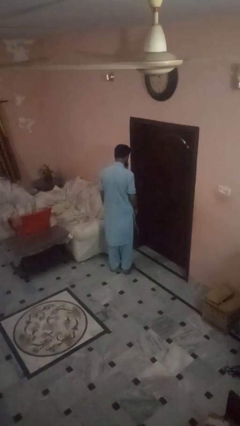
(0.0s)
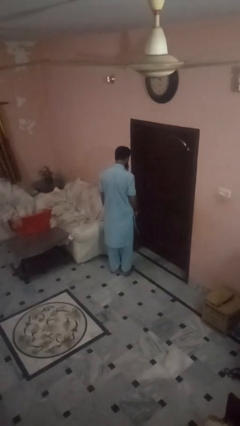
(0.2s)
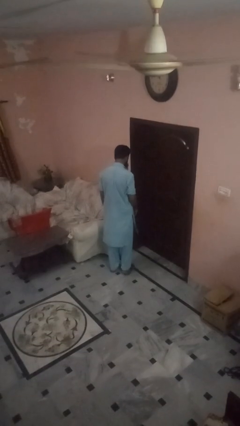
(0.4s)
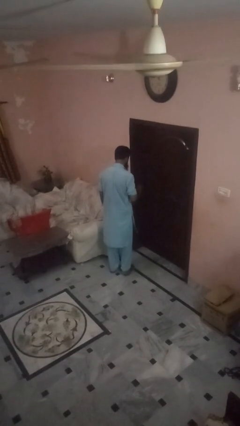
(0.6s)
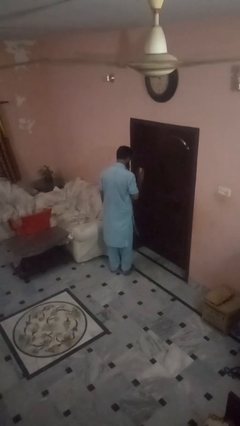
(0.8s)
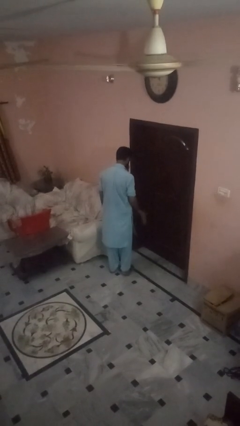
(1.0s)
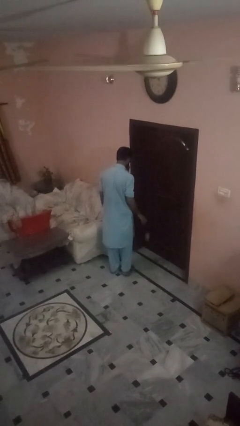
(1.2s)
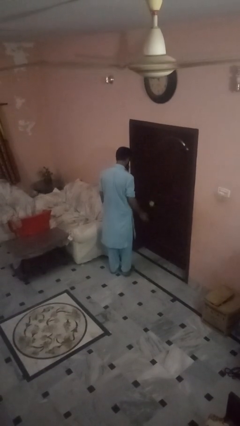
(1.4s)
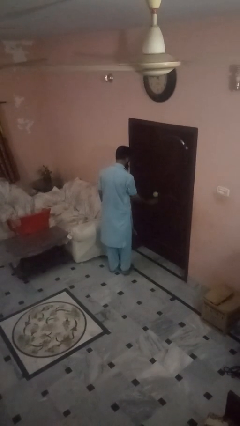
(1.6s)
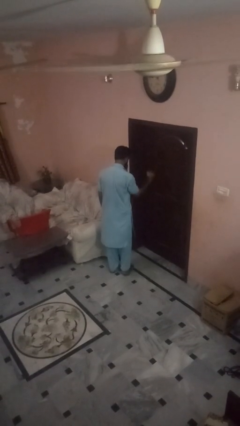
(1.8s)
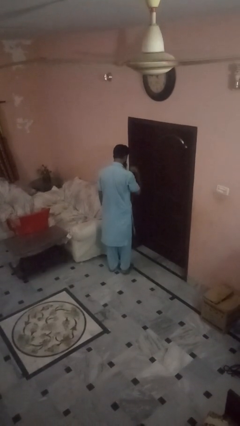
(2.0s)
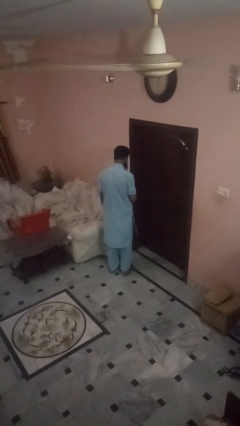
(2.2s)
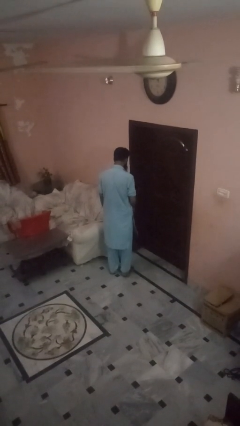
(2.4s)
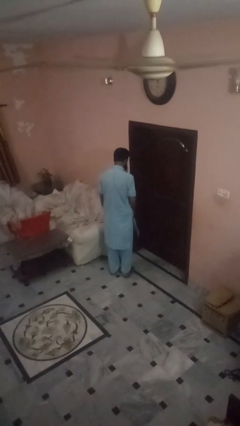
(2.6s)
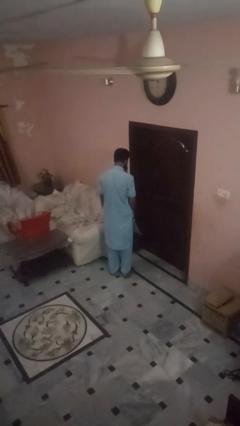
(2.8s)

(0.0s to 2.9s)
person bounces ball on floor

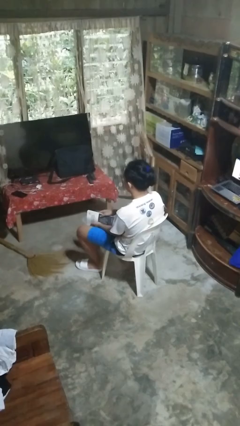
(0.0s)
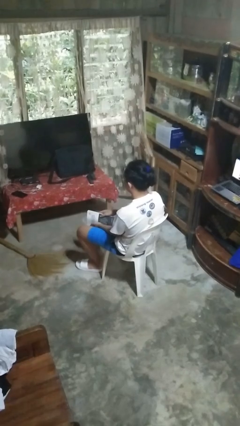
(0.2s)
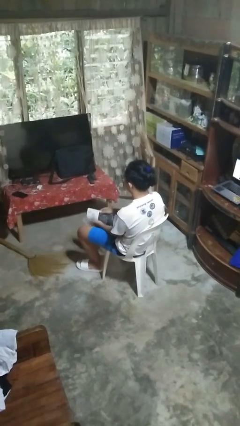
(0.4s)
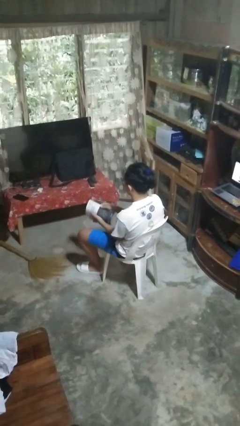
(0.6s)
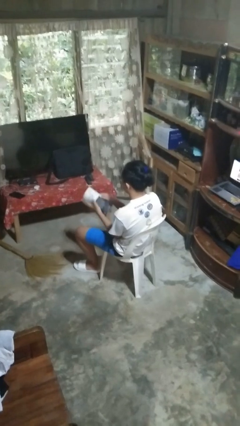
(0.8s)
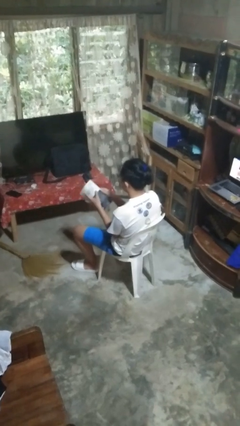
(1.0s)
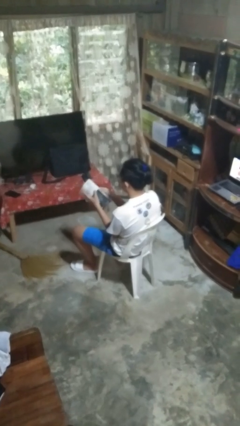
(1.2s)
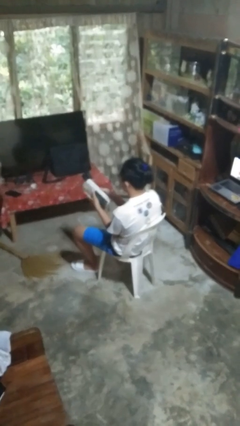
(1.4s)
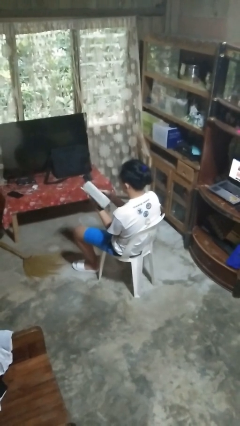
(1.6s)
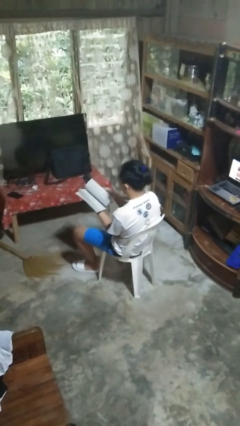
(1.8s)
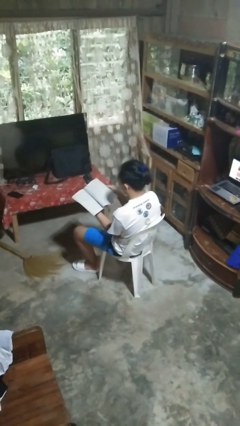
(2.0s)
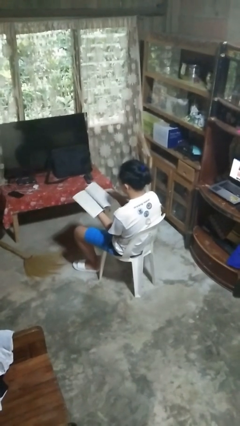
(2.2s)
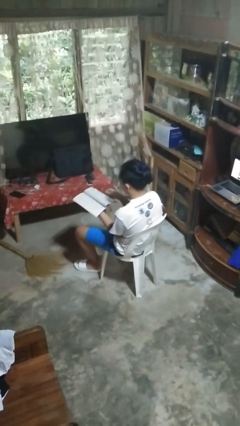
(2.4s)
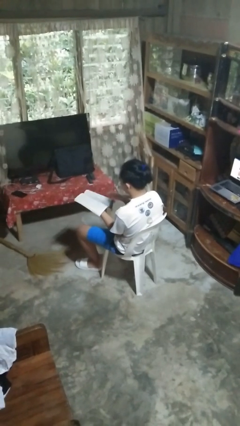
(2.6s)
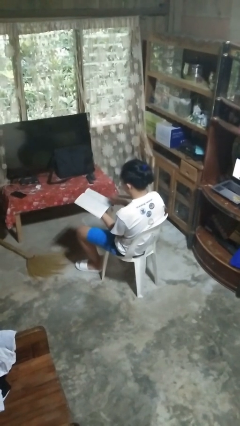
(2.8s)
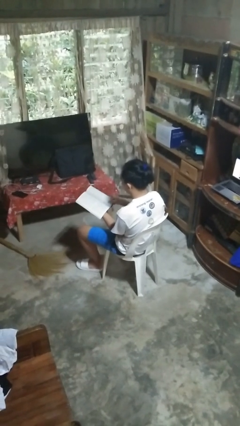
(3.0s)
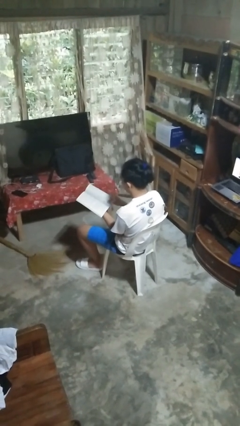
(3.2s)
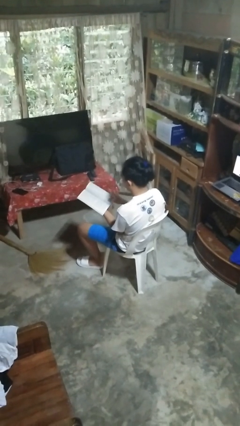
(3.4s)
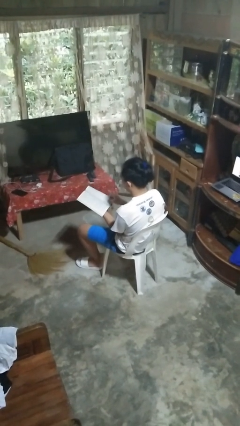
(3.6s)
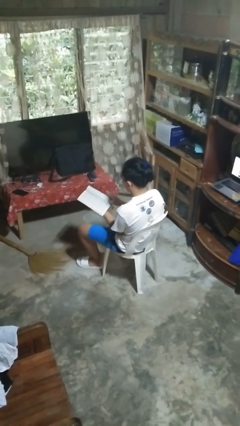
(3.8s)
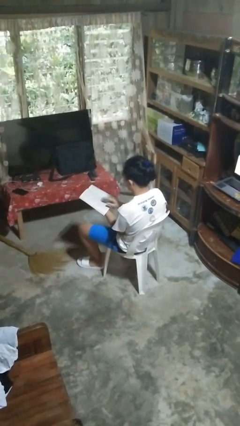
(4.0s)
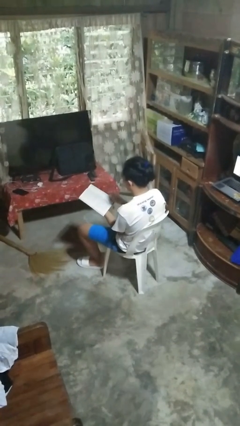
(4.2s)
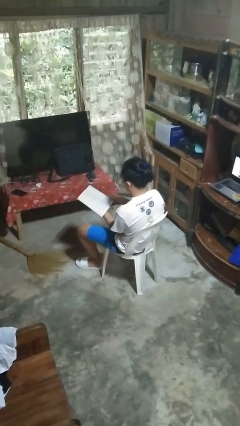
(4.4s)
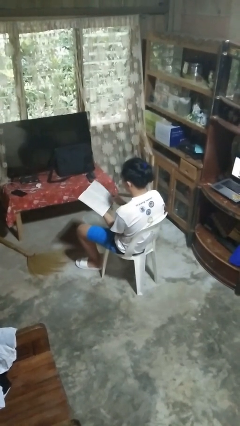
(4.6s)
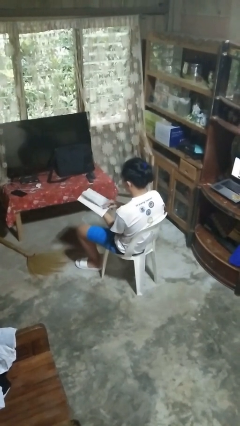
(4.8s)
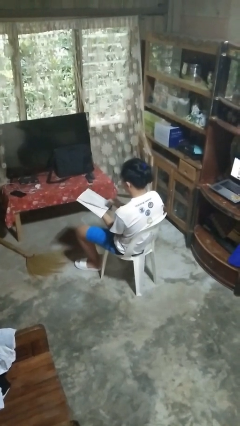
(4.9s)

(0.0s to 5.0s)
person reads book

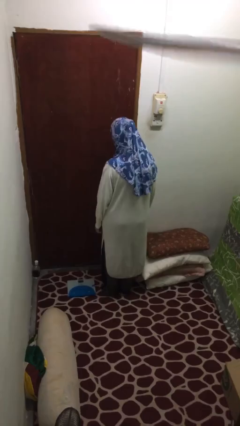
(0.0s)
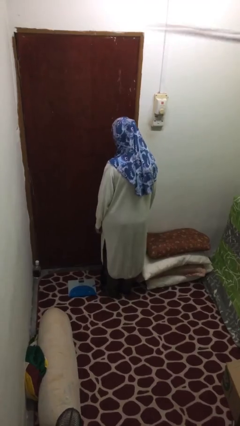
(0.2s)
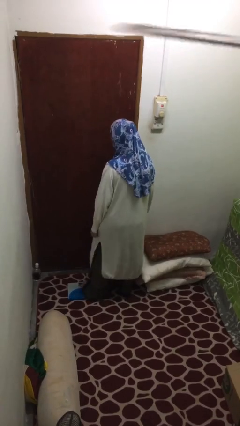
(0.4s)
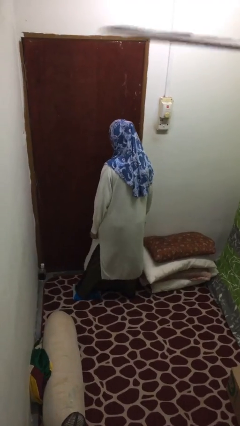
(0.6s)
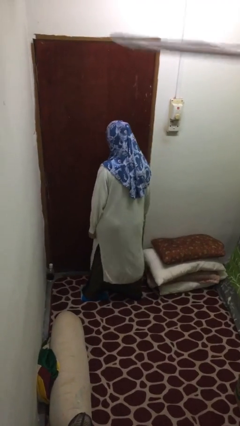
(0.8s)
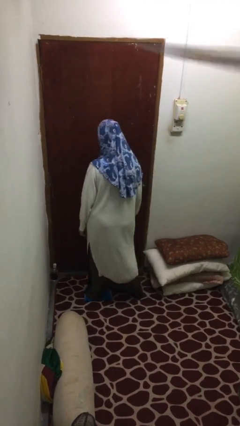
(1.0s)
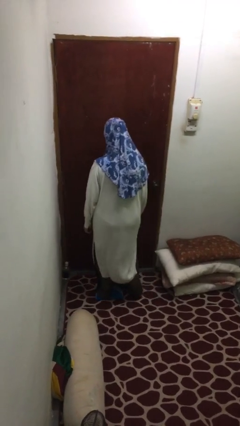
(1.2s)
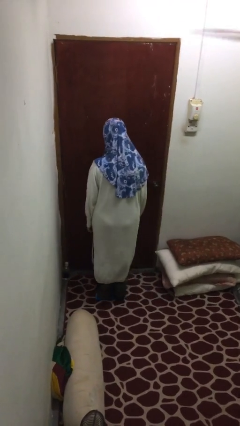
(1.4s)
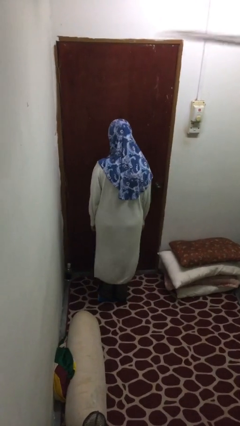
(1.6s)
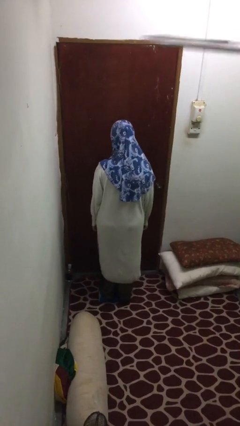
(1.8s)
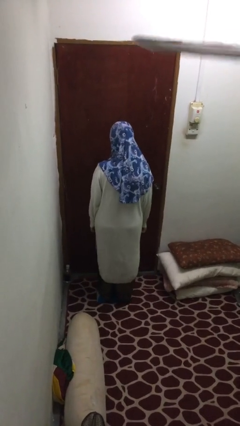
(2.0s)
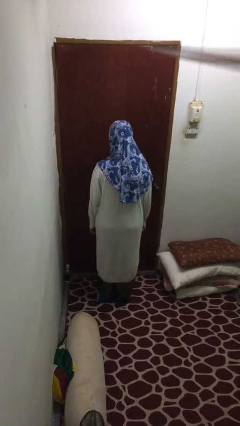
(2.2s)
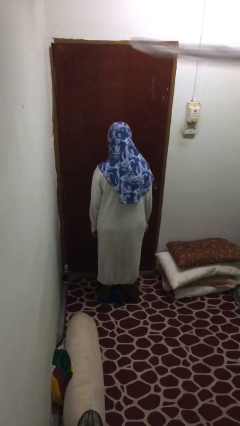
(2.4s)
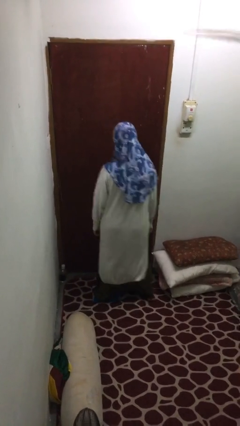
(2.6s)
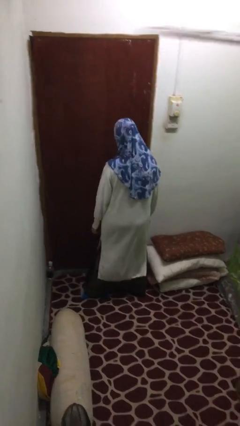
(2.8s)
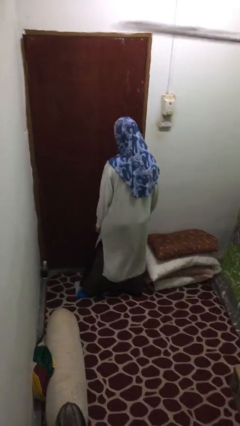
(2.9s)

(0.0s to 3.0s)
person uses bodyweight scale

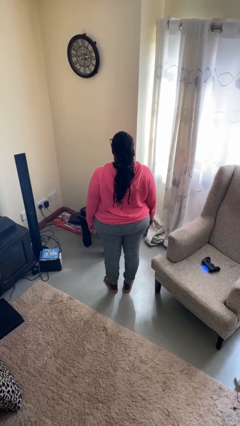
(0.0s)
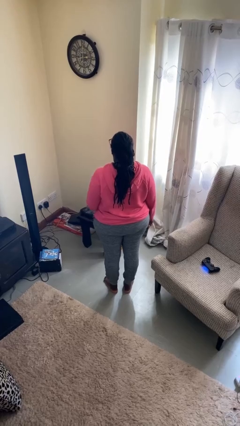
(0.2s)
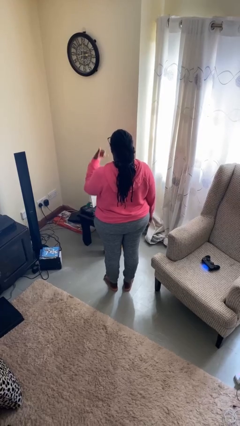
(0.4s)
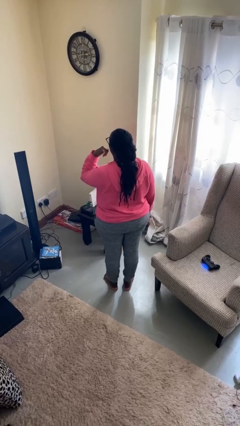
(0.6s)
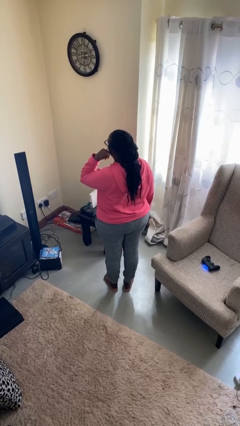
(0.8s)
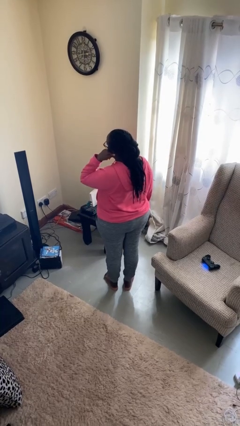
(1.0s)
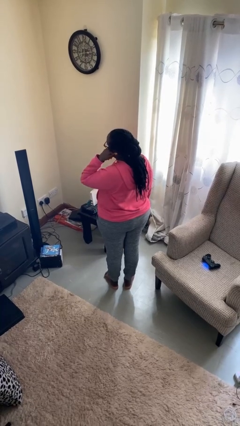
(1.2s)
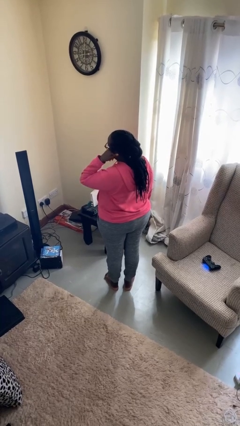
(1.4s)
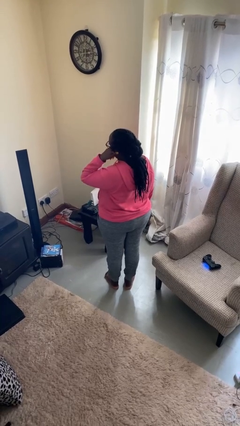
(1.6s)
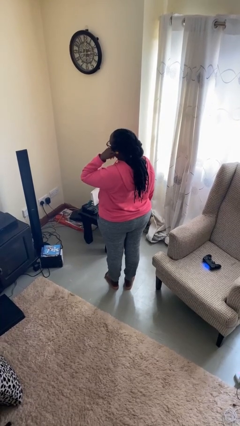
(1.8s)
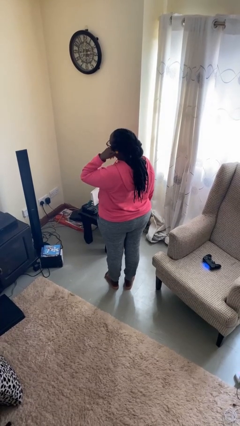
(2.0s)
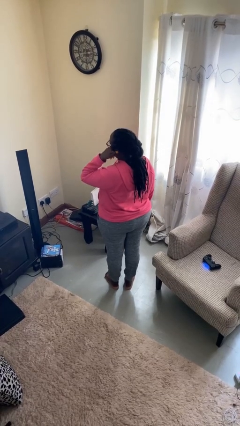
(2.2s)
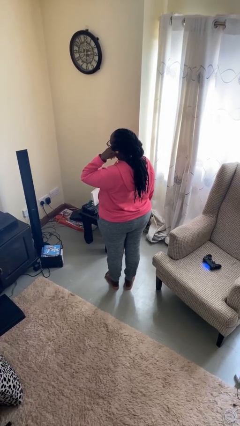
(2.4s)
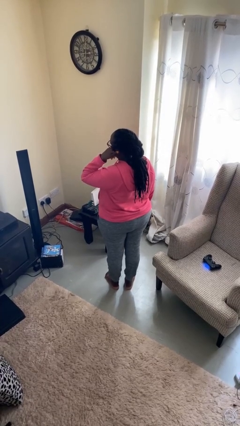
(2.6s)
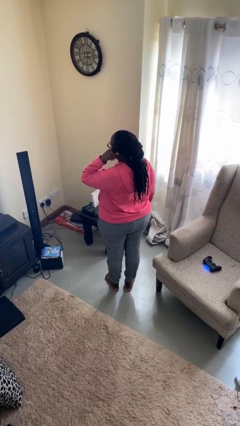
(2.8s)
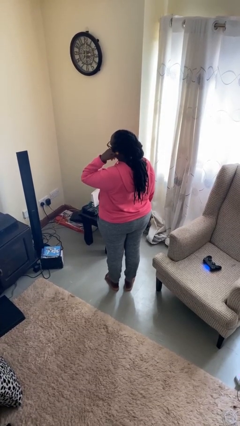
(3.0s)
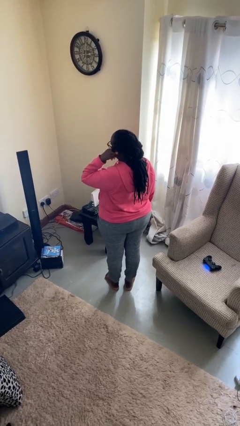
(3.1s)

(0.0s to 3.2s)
person gestures call me

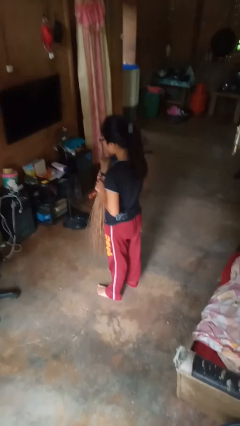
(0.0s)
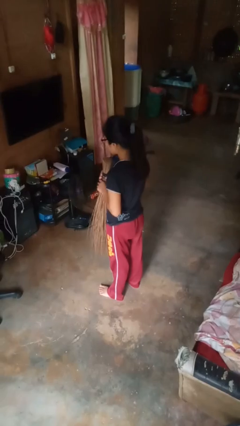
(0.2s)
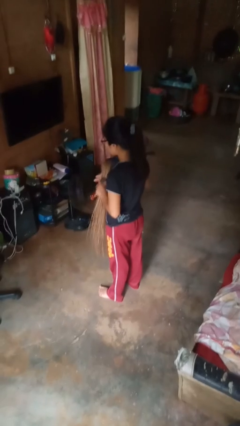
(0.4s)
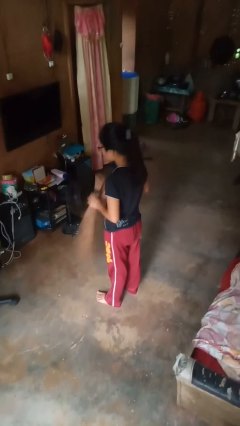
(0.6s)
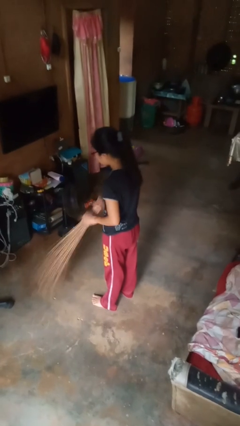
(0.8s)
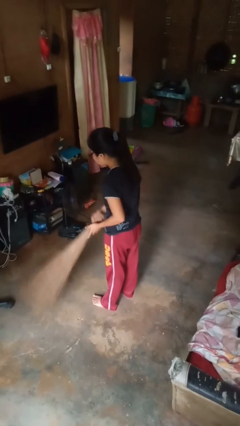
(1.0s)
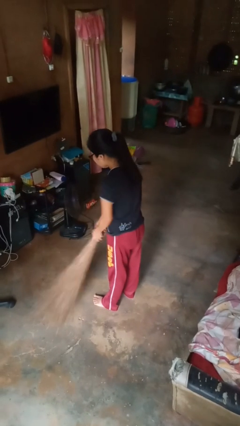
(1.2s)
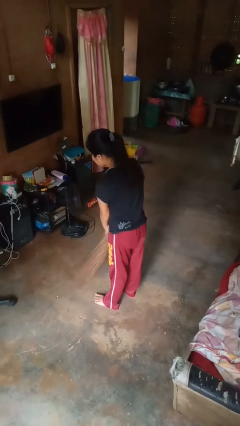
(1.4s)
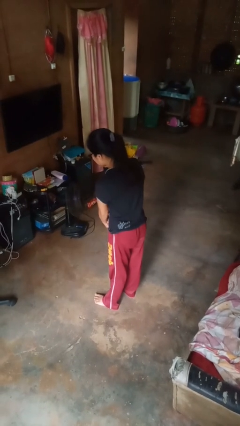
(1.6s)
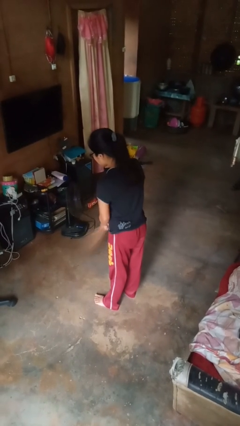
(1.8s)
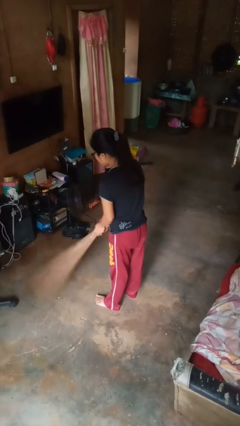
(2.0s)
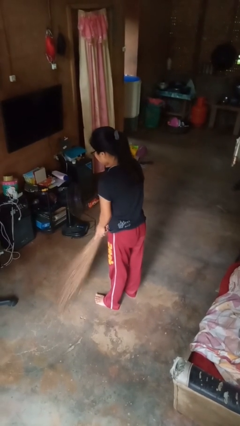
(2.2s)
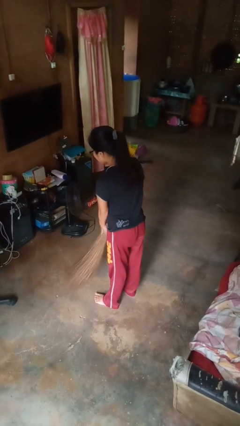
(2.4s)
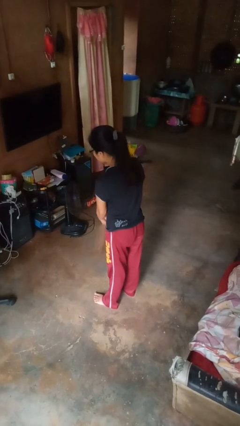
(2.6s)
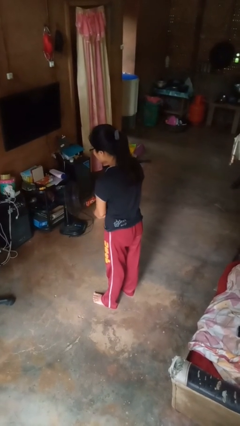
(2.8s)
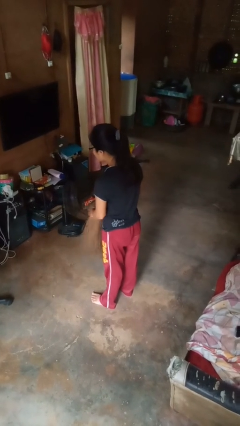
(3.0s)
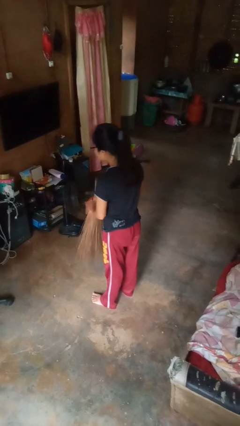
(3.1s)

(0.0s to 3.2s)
person sweeps floor

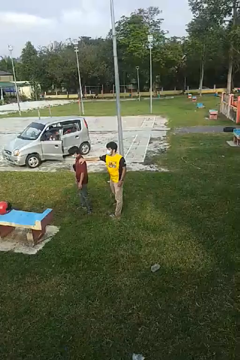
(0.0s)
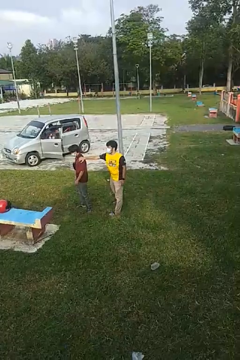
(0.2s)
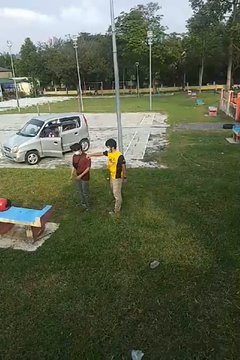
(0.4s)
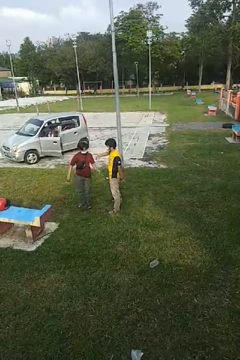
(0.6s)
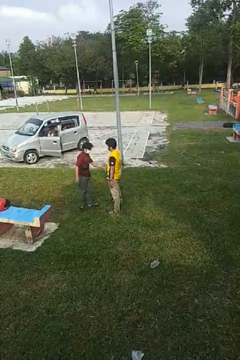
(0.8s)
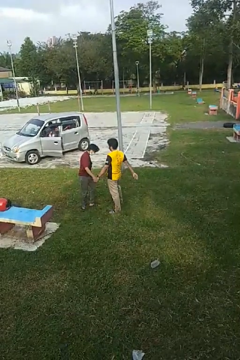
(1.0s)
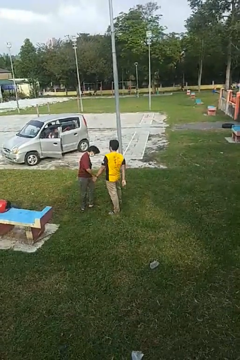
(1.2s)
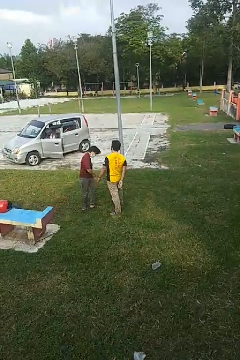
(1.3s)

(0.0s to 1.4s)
person spins person around
